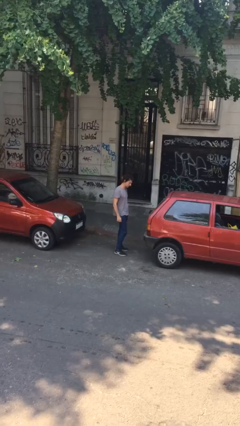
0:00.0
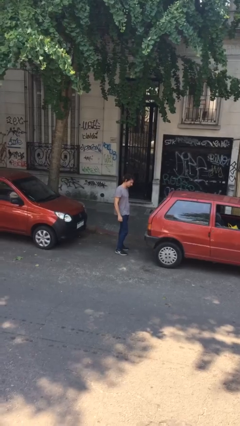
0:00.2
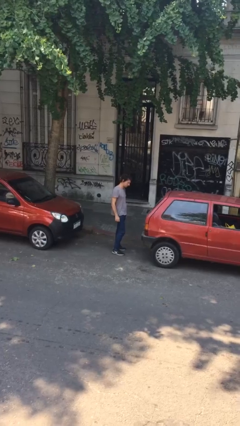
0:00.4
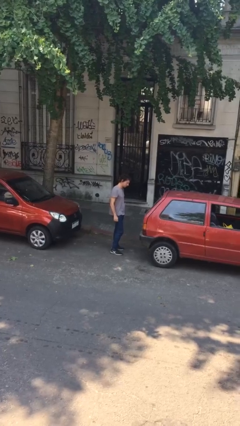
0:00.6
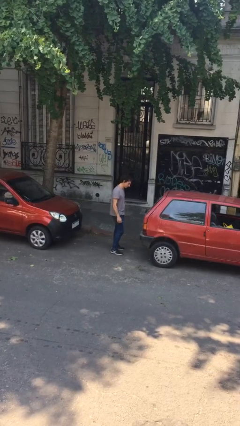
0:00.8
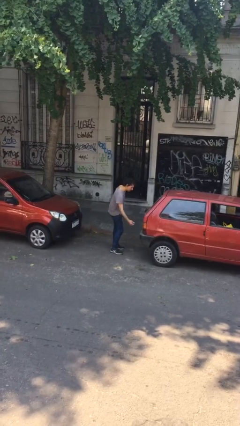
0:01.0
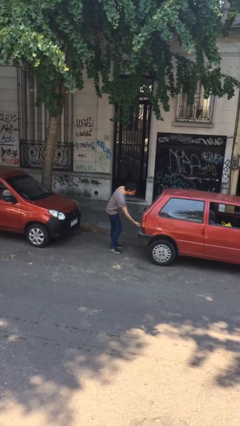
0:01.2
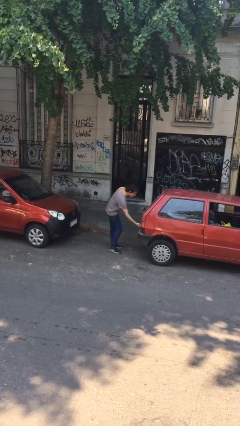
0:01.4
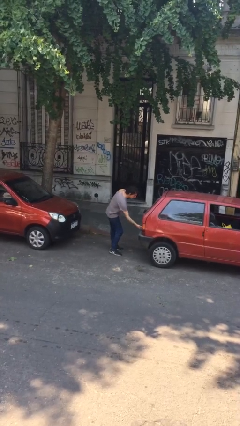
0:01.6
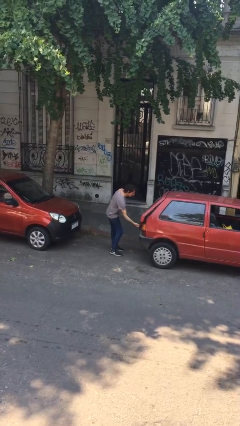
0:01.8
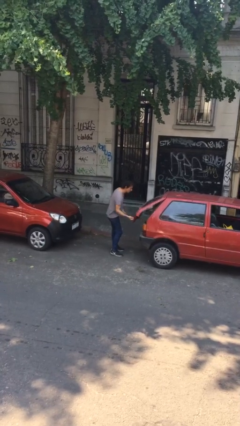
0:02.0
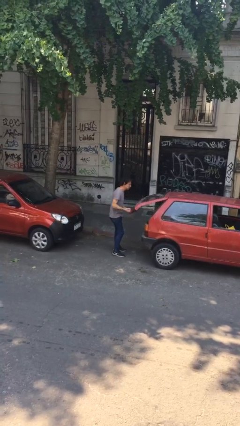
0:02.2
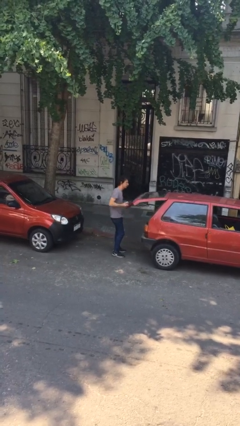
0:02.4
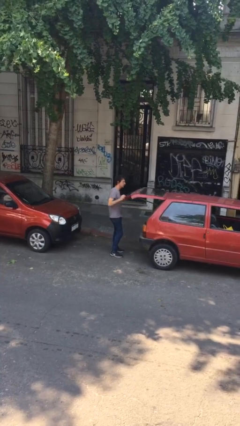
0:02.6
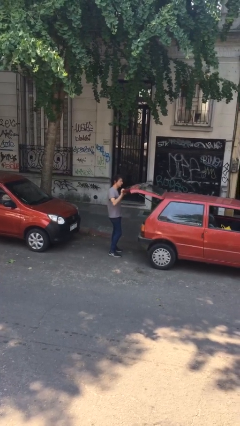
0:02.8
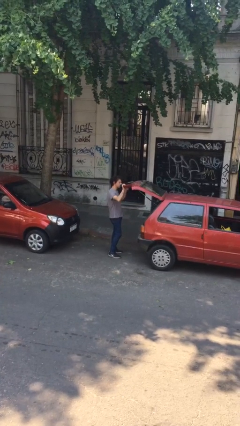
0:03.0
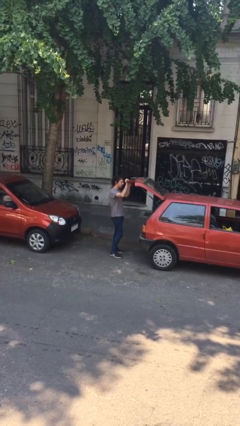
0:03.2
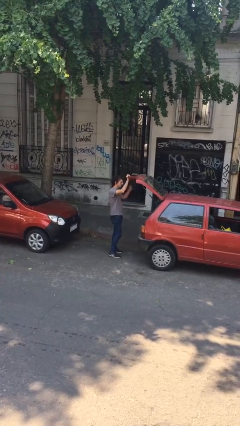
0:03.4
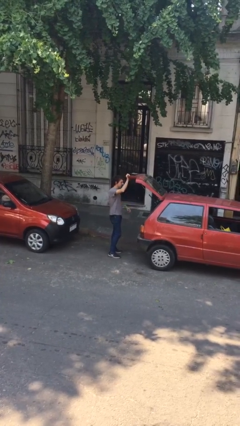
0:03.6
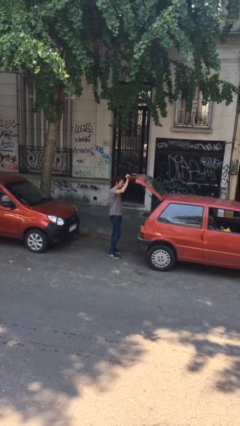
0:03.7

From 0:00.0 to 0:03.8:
person opens car trunk

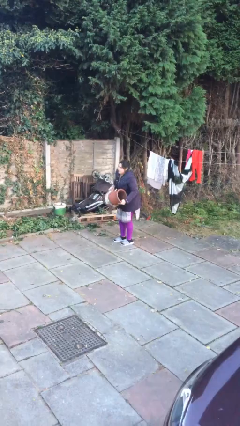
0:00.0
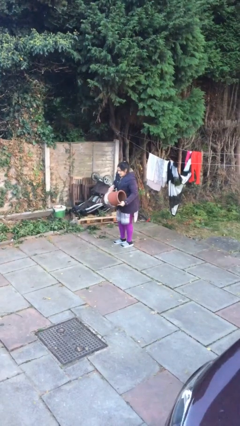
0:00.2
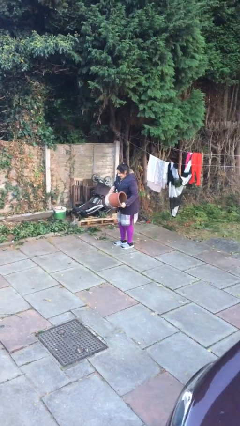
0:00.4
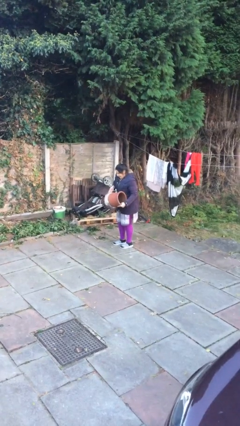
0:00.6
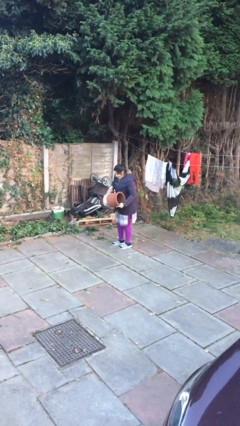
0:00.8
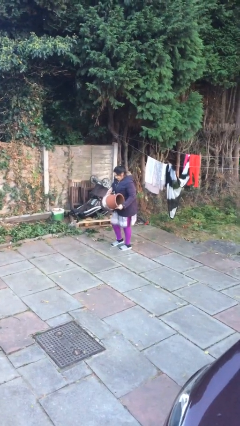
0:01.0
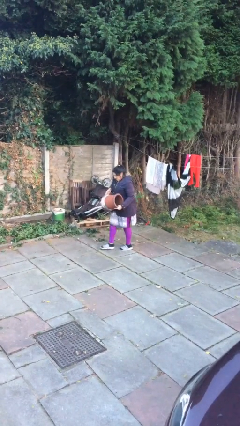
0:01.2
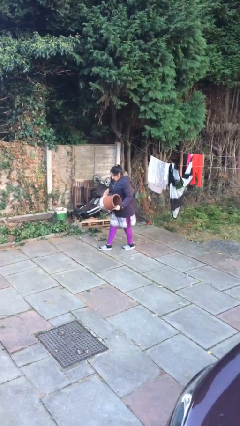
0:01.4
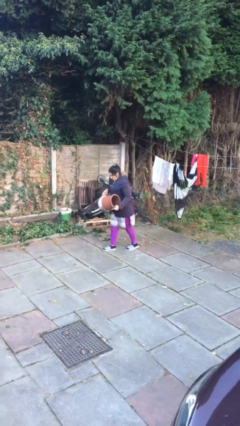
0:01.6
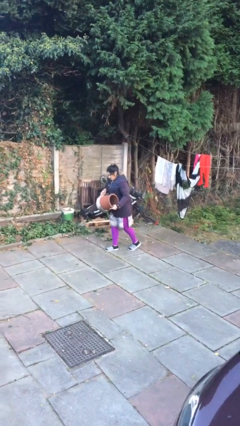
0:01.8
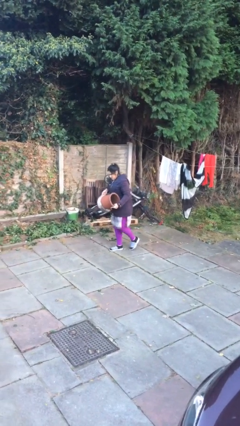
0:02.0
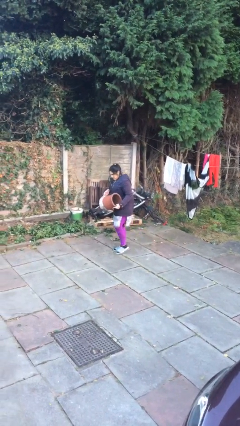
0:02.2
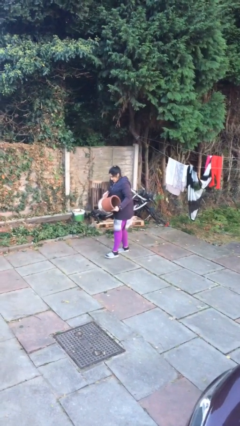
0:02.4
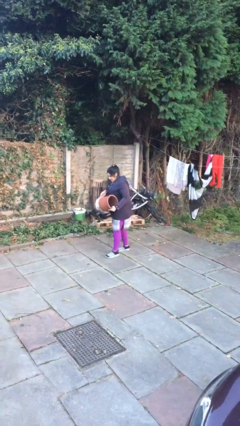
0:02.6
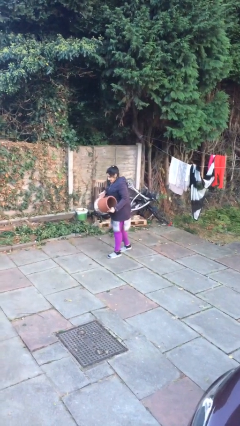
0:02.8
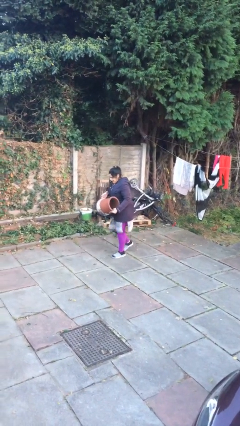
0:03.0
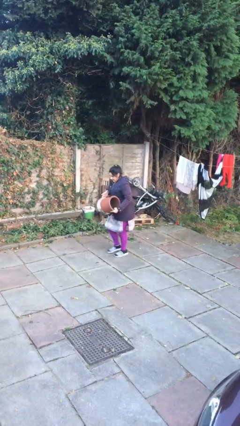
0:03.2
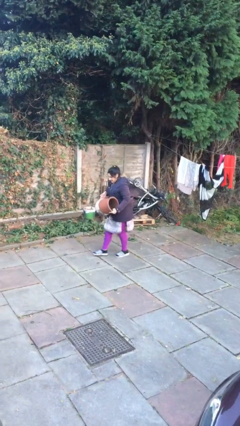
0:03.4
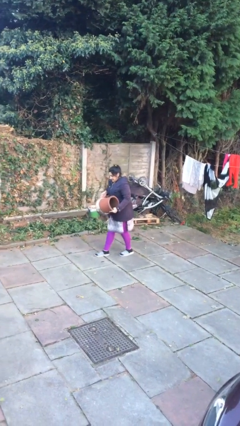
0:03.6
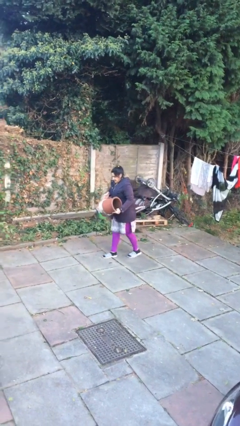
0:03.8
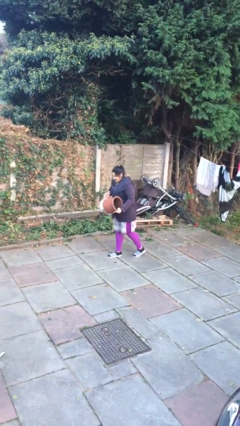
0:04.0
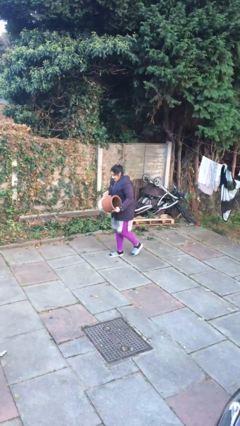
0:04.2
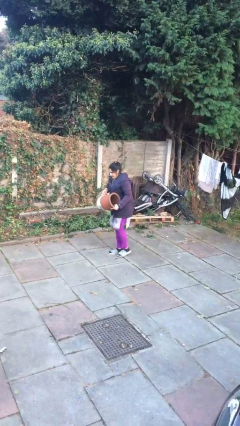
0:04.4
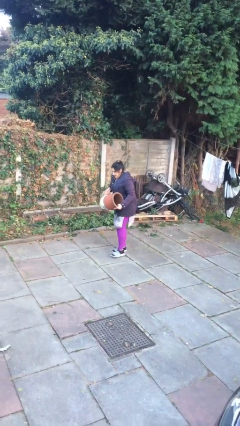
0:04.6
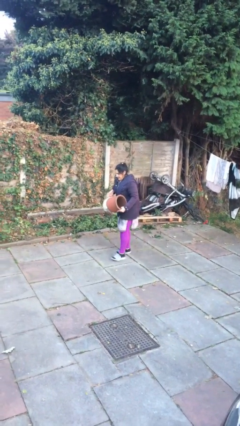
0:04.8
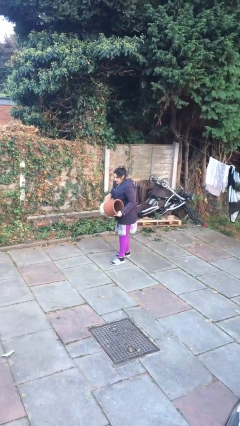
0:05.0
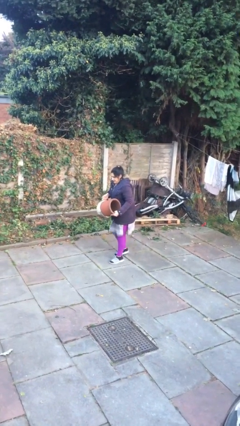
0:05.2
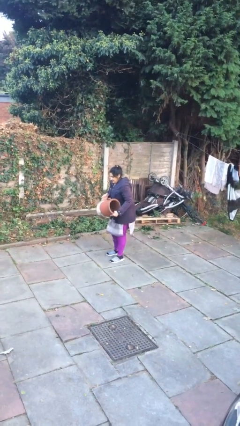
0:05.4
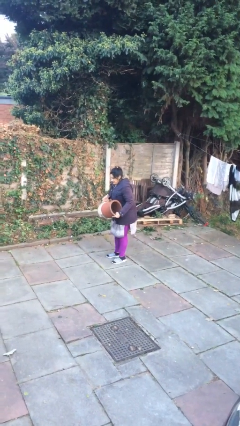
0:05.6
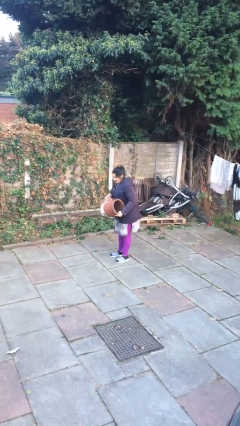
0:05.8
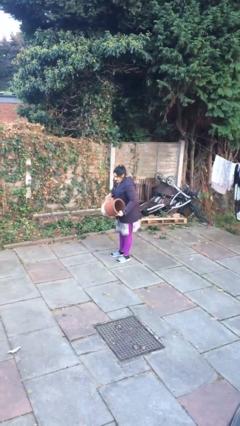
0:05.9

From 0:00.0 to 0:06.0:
person carries heavy object

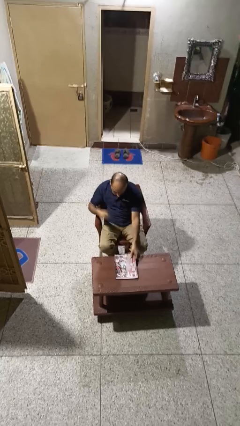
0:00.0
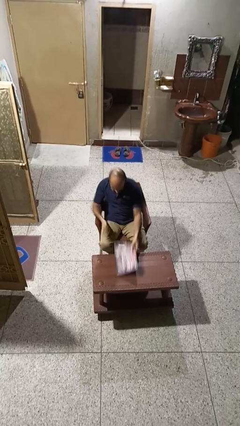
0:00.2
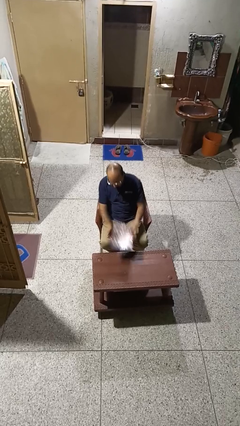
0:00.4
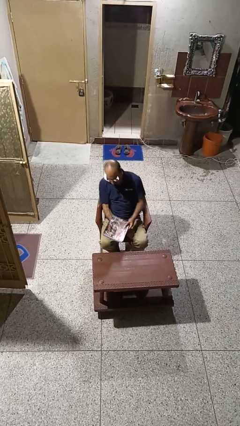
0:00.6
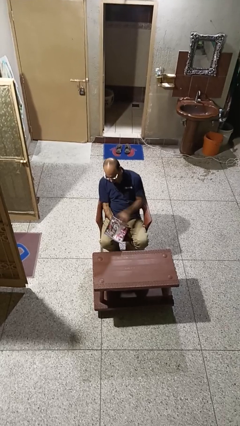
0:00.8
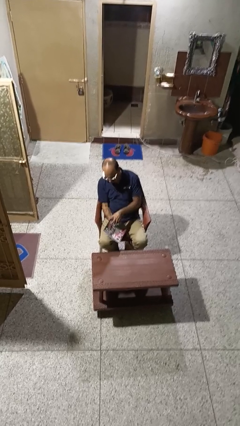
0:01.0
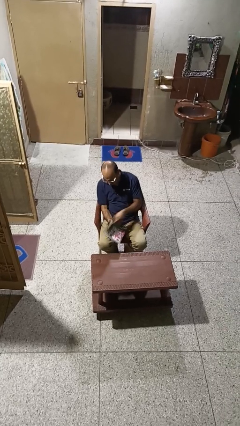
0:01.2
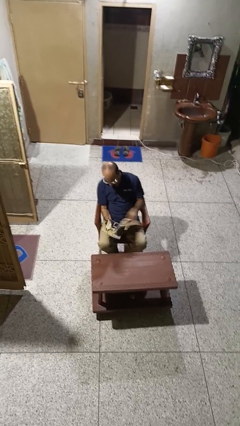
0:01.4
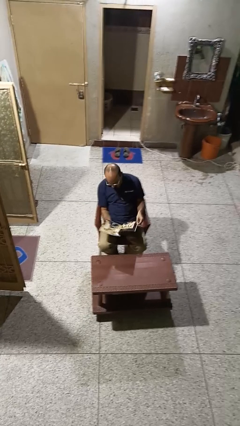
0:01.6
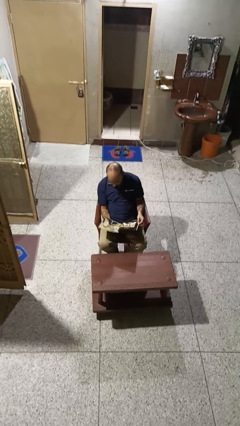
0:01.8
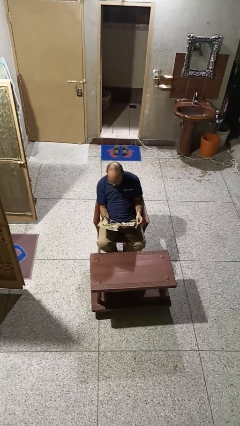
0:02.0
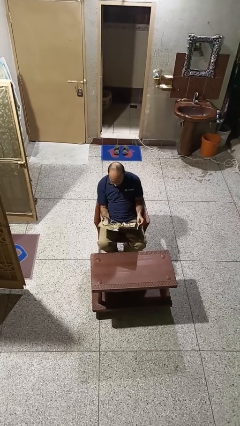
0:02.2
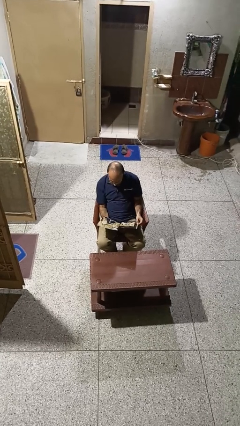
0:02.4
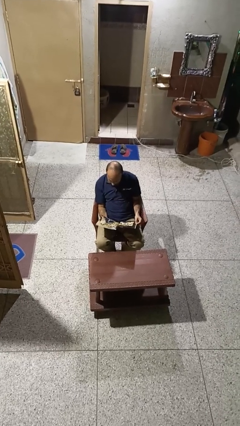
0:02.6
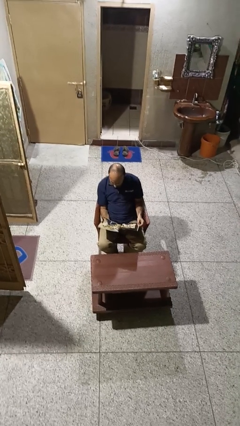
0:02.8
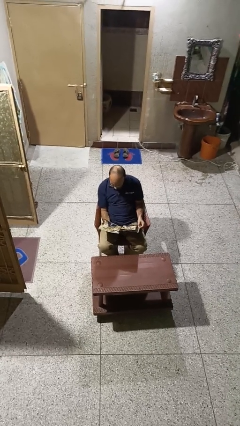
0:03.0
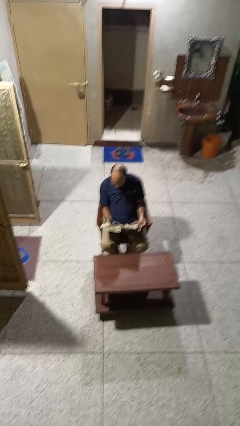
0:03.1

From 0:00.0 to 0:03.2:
person reads magazine

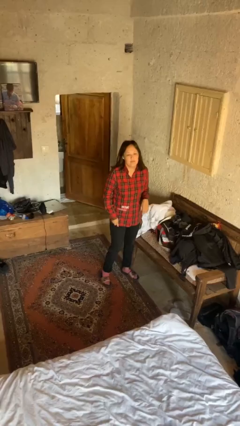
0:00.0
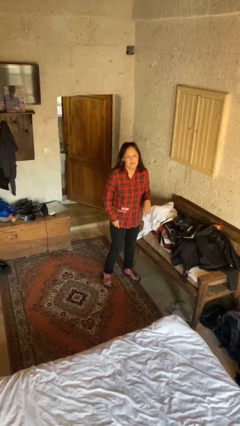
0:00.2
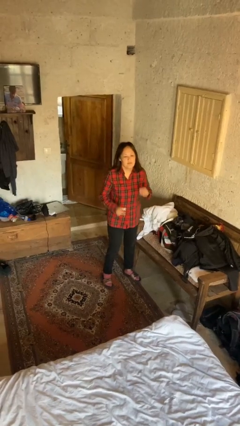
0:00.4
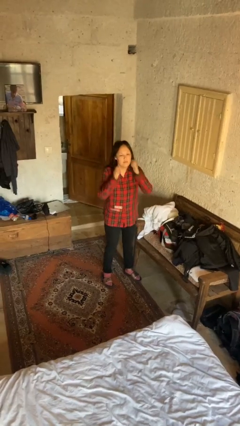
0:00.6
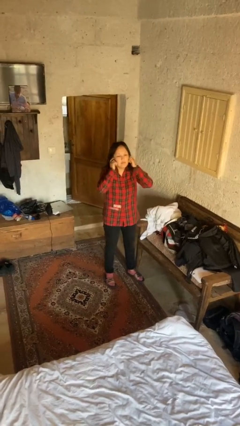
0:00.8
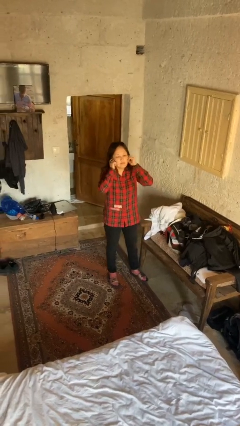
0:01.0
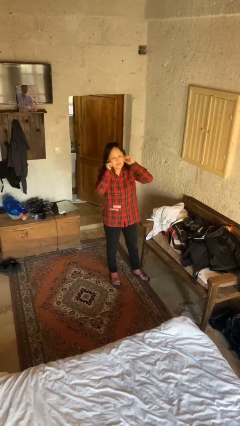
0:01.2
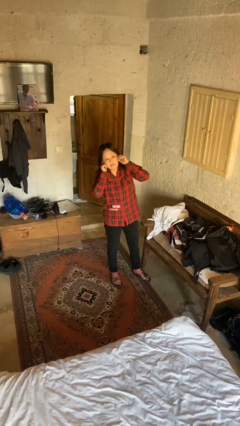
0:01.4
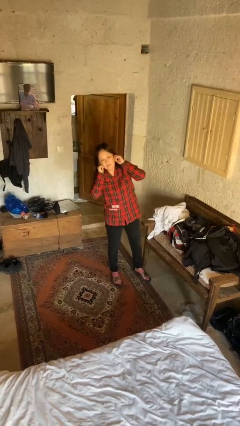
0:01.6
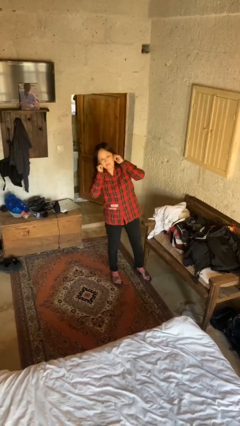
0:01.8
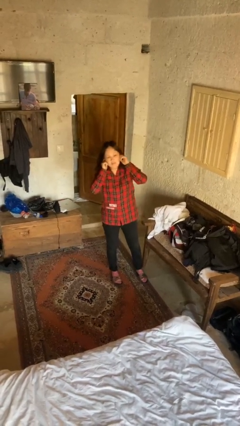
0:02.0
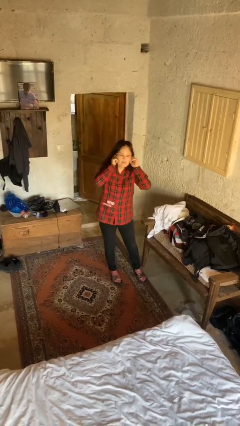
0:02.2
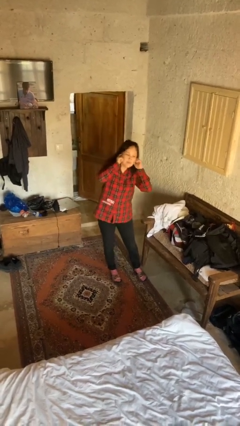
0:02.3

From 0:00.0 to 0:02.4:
person puts fingers in ear

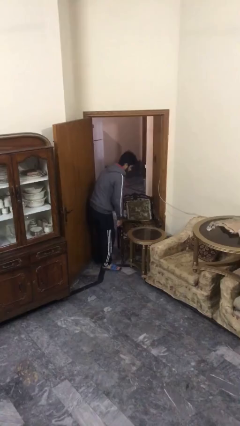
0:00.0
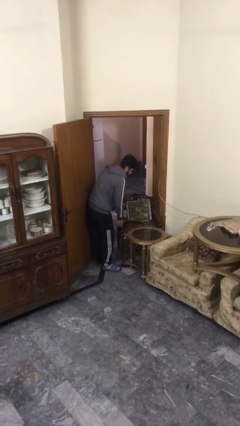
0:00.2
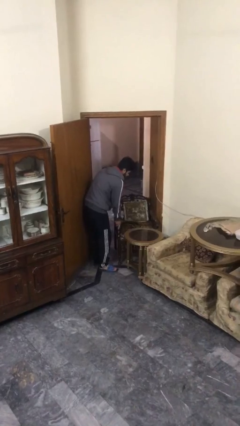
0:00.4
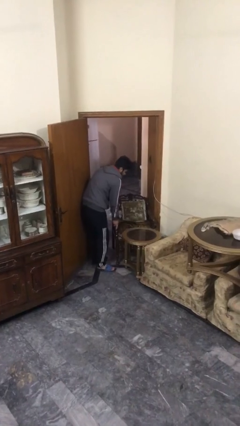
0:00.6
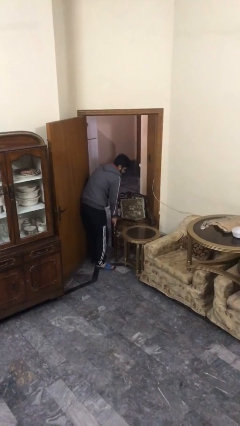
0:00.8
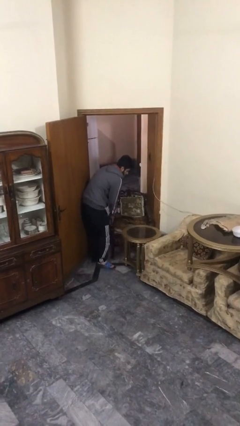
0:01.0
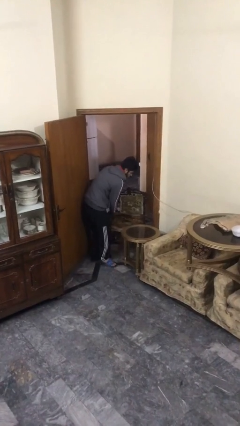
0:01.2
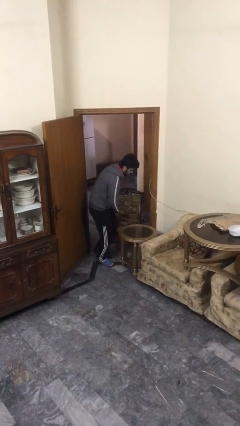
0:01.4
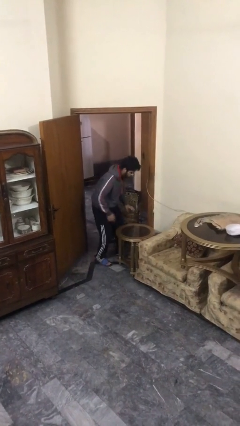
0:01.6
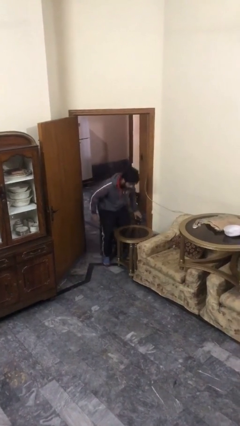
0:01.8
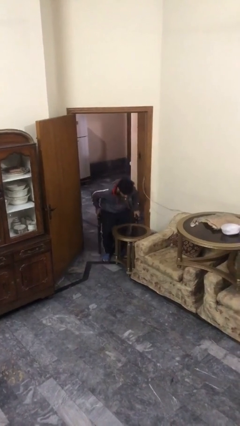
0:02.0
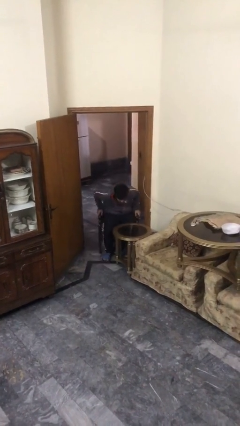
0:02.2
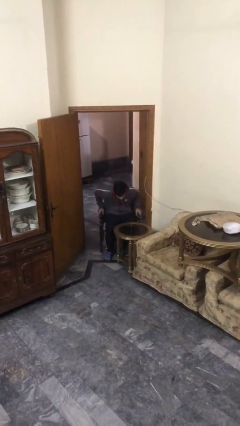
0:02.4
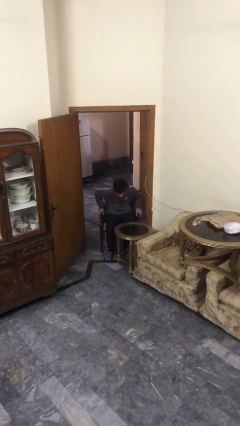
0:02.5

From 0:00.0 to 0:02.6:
person sits down
